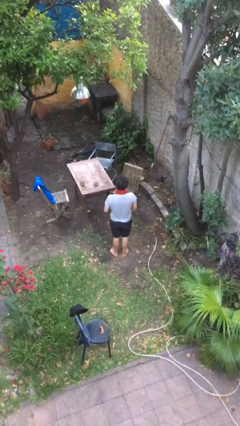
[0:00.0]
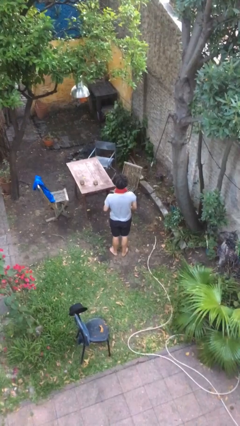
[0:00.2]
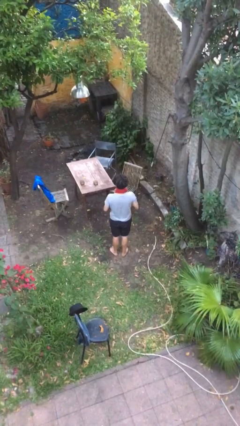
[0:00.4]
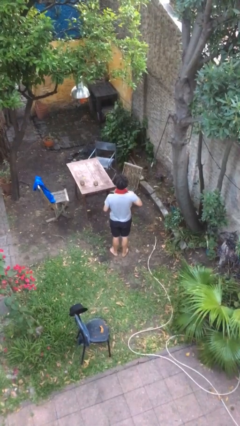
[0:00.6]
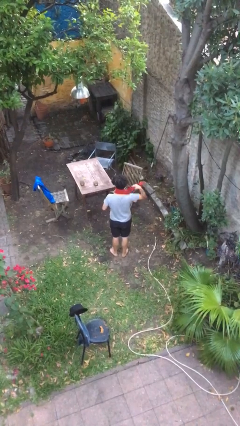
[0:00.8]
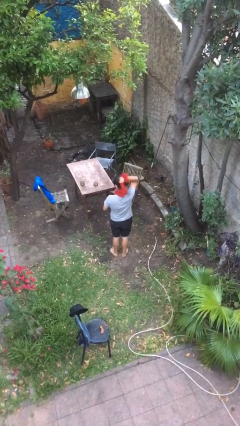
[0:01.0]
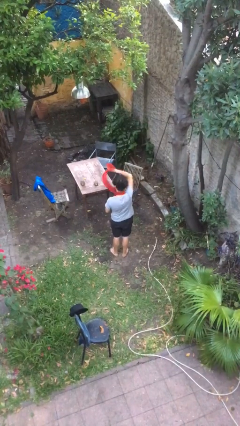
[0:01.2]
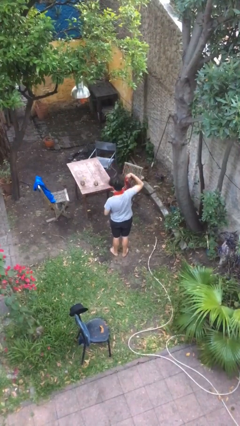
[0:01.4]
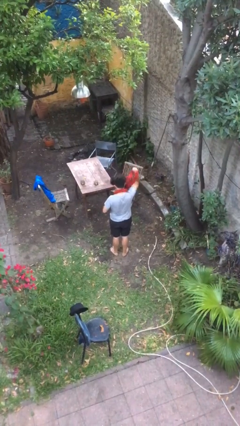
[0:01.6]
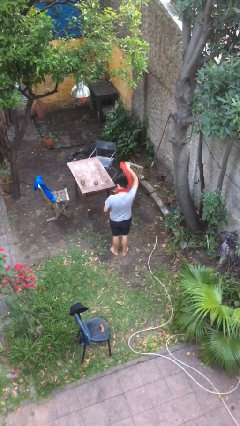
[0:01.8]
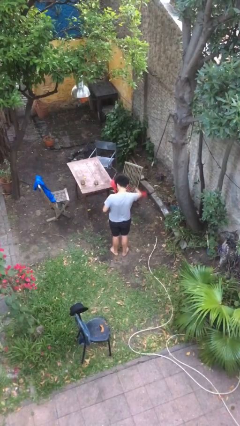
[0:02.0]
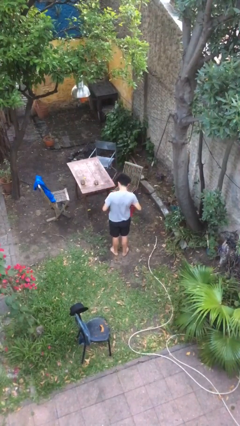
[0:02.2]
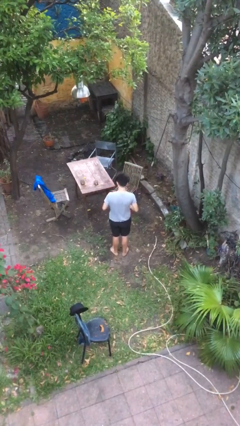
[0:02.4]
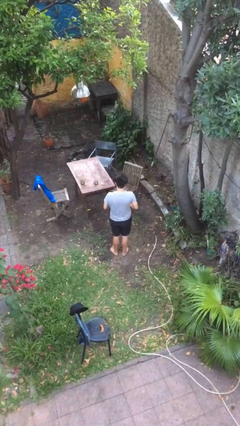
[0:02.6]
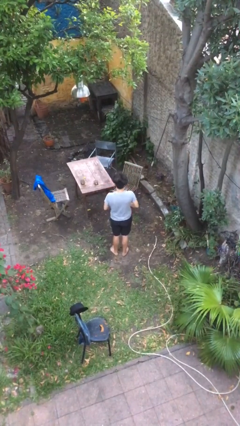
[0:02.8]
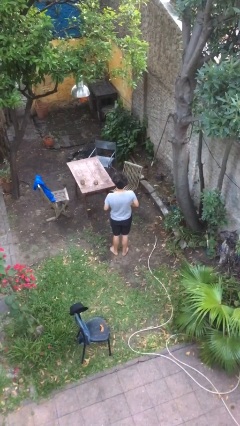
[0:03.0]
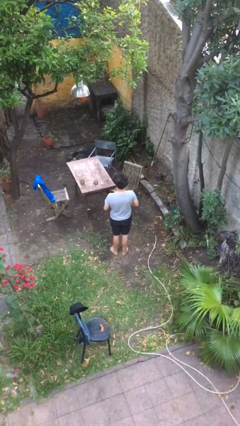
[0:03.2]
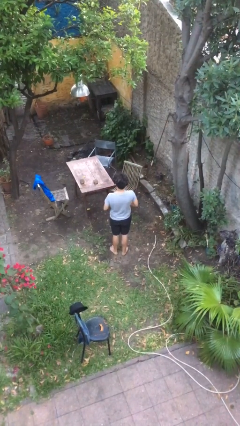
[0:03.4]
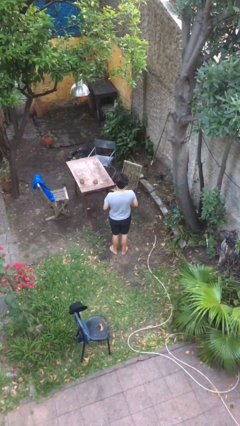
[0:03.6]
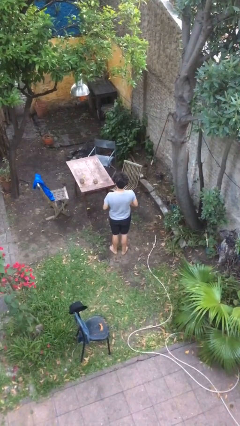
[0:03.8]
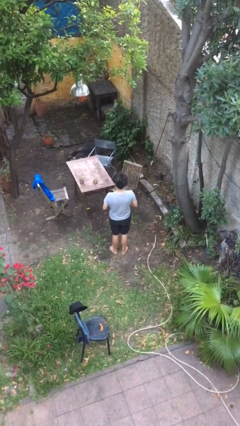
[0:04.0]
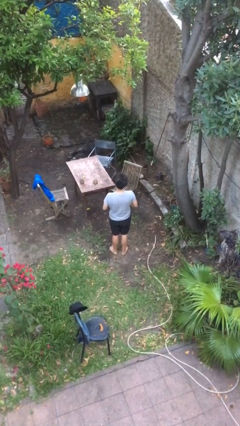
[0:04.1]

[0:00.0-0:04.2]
person takes off scarf

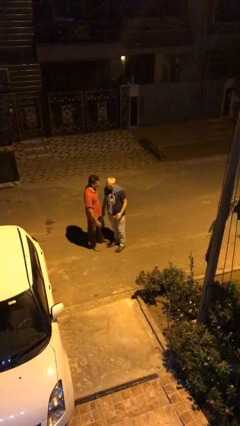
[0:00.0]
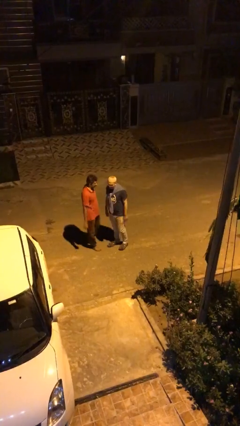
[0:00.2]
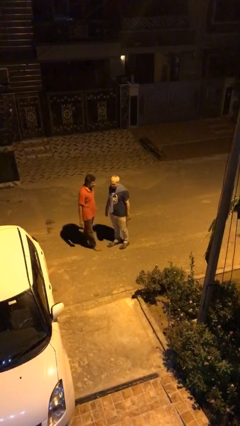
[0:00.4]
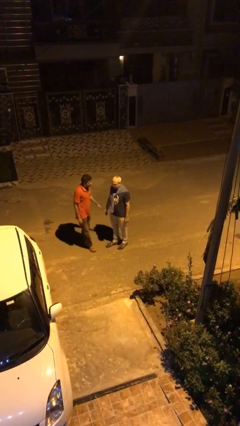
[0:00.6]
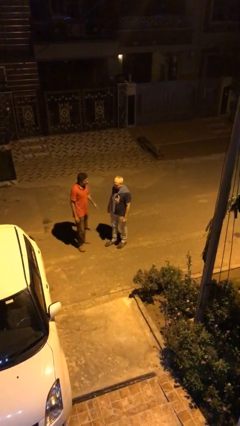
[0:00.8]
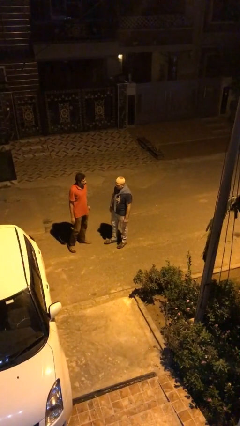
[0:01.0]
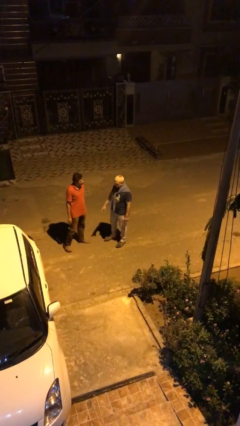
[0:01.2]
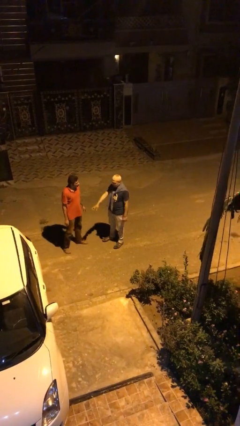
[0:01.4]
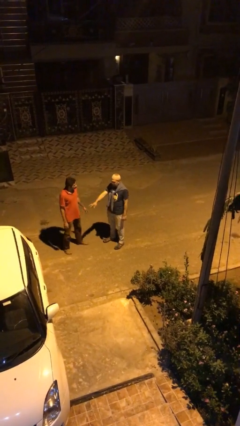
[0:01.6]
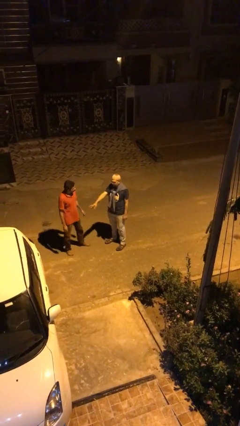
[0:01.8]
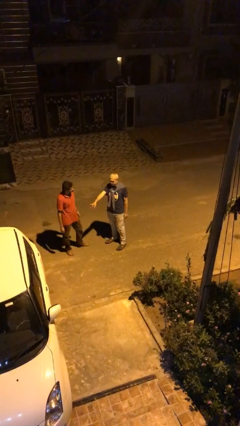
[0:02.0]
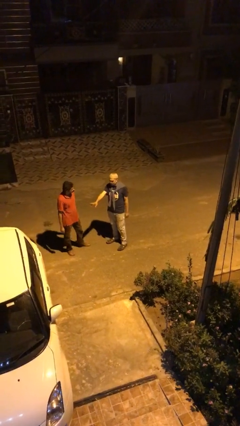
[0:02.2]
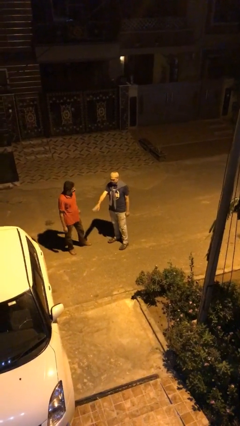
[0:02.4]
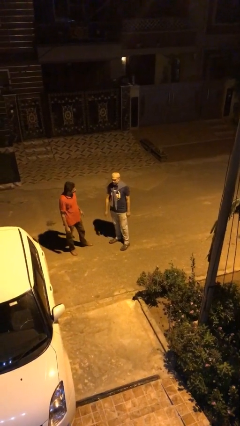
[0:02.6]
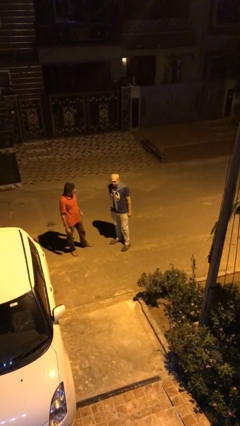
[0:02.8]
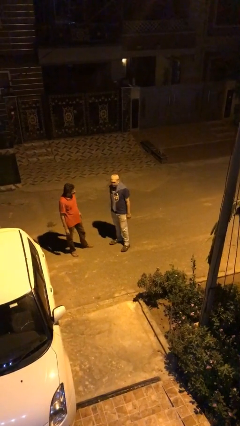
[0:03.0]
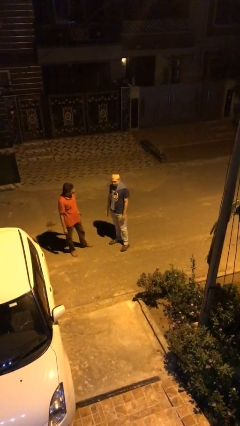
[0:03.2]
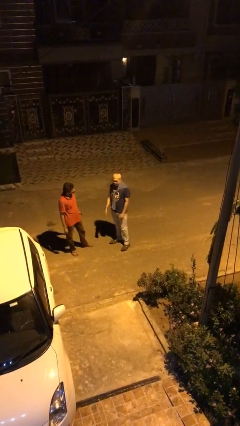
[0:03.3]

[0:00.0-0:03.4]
person talks to person

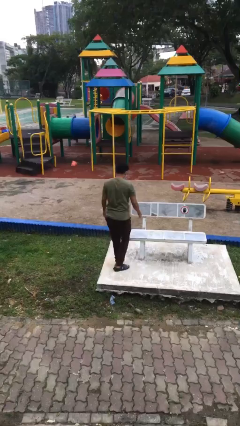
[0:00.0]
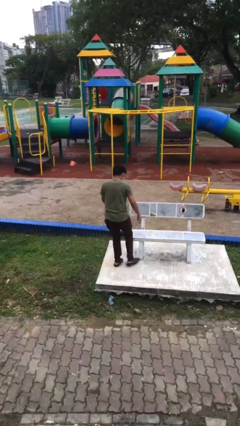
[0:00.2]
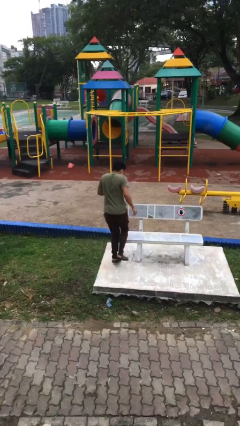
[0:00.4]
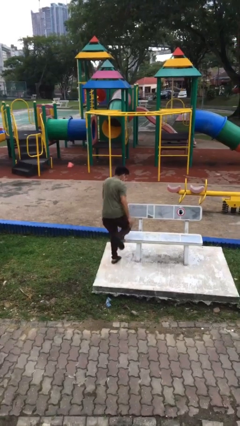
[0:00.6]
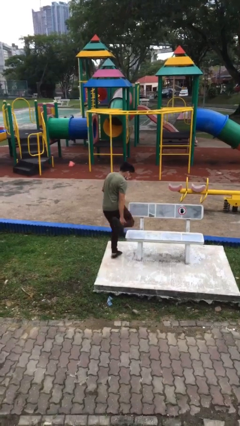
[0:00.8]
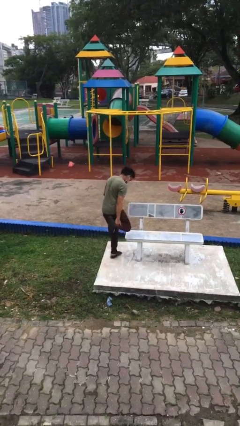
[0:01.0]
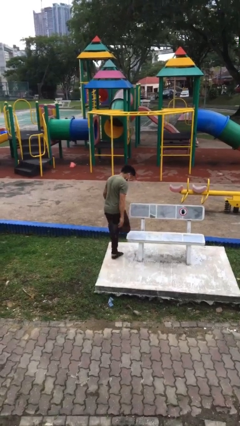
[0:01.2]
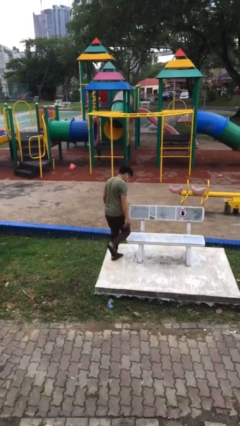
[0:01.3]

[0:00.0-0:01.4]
person stubs toe

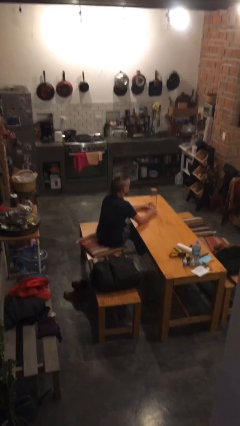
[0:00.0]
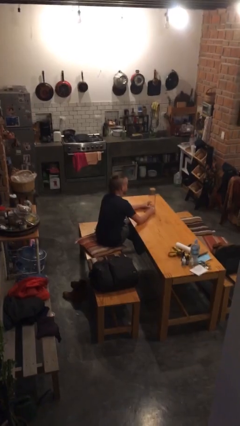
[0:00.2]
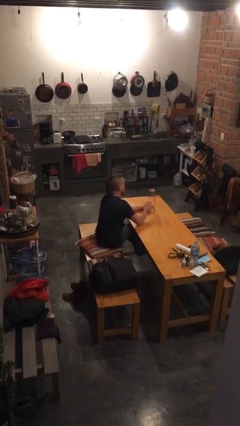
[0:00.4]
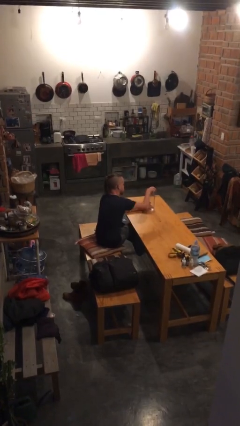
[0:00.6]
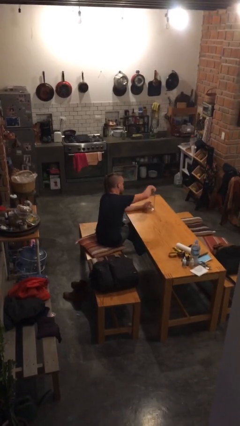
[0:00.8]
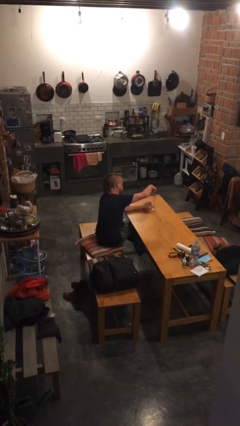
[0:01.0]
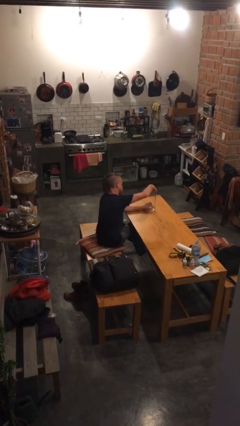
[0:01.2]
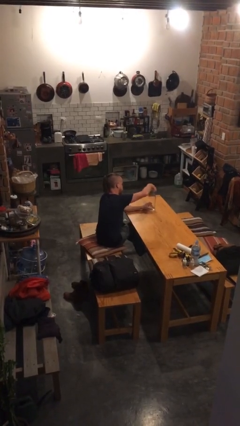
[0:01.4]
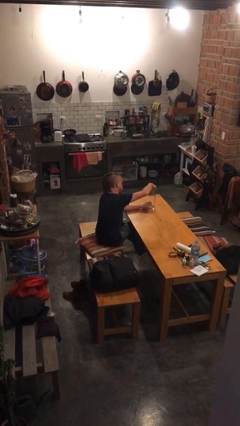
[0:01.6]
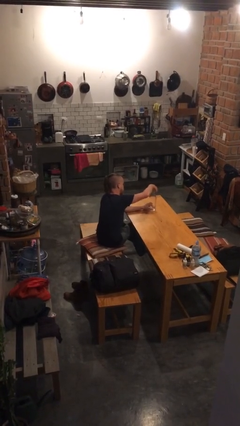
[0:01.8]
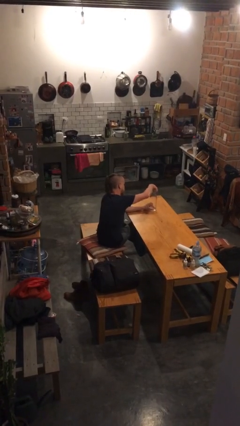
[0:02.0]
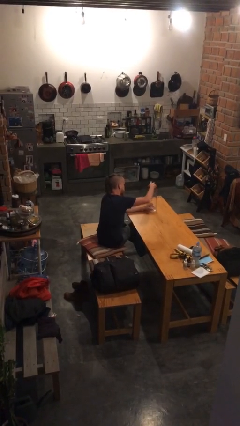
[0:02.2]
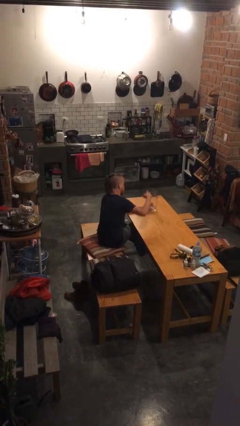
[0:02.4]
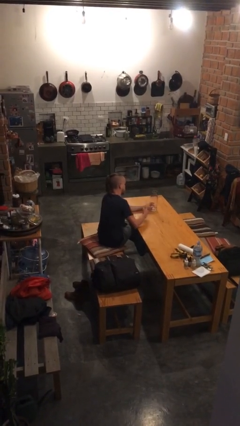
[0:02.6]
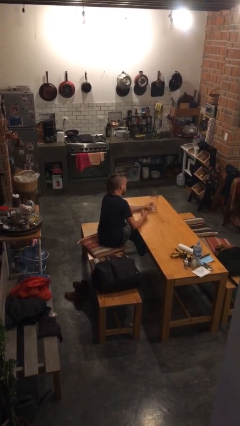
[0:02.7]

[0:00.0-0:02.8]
person opens jar

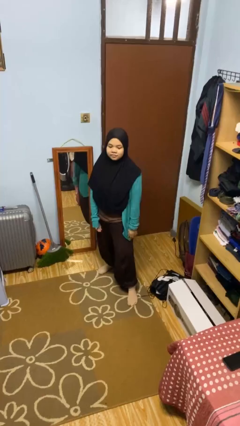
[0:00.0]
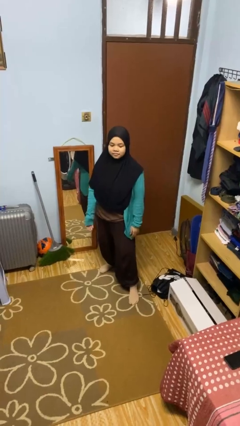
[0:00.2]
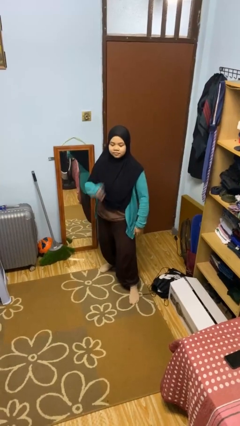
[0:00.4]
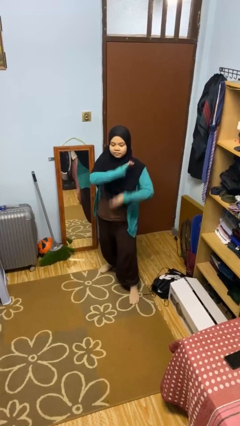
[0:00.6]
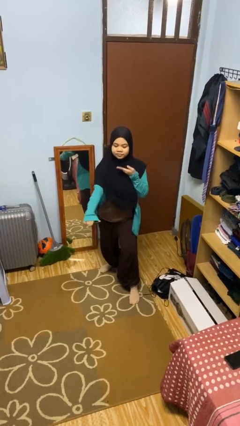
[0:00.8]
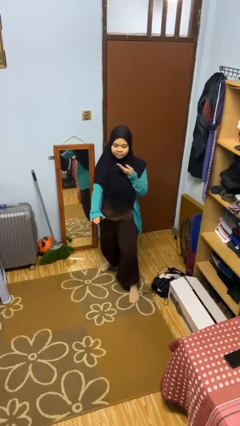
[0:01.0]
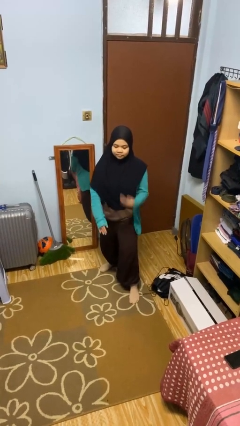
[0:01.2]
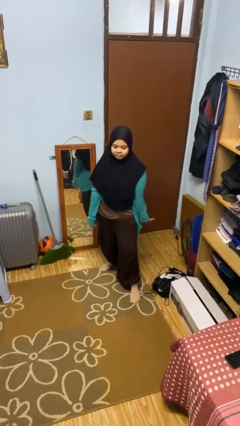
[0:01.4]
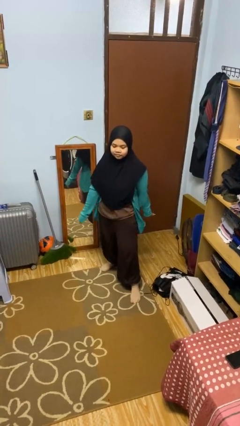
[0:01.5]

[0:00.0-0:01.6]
person karate chop

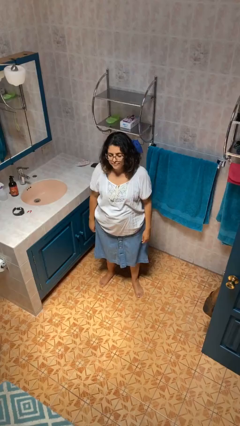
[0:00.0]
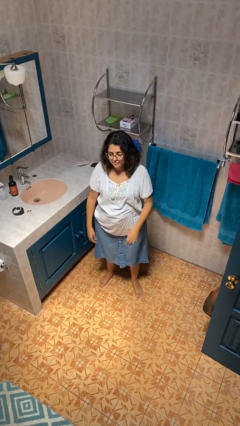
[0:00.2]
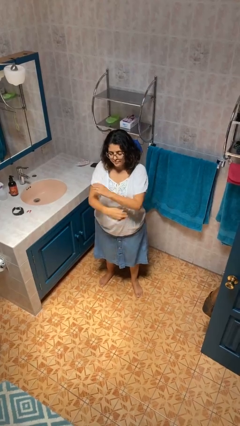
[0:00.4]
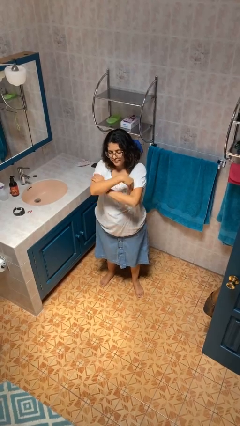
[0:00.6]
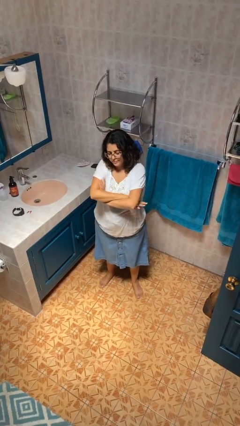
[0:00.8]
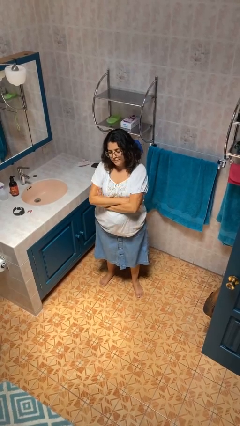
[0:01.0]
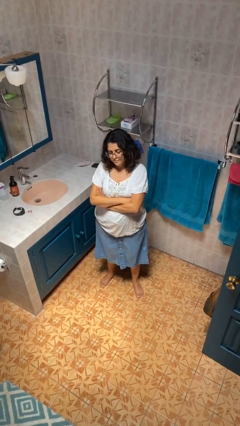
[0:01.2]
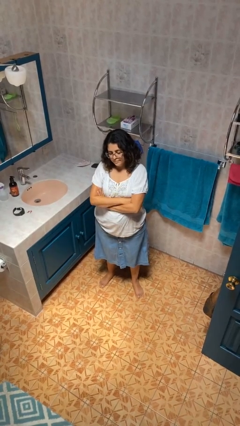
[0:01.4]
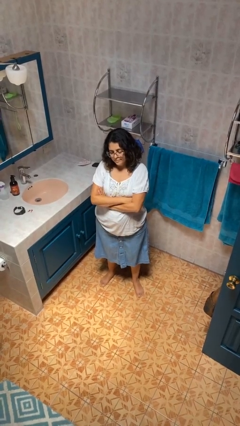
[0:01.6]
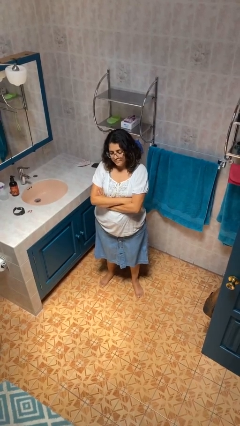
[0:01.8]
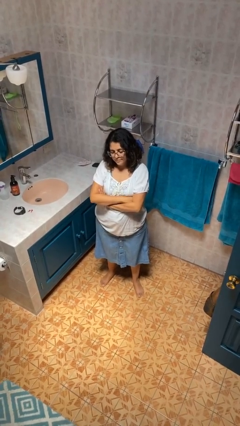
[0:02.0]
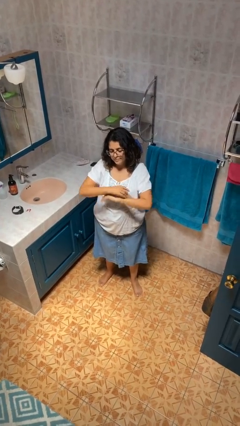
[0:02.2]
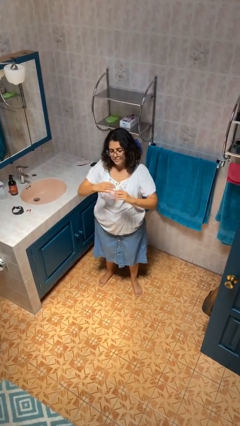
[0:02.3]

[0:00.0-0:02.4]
person crosses arms

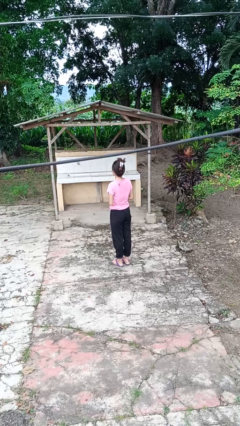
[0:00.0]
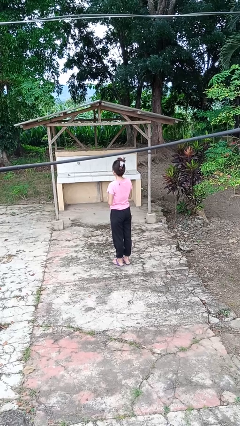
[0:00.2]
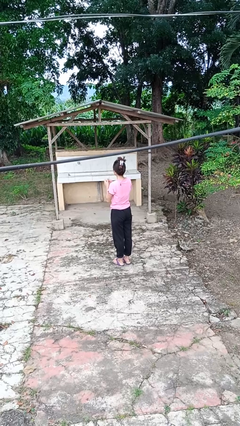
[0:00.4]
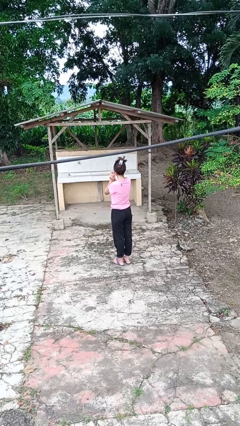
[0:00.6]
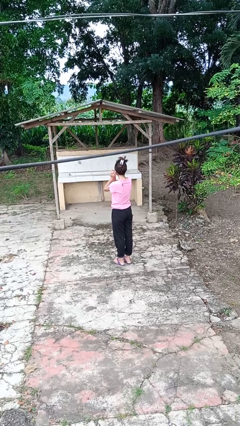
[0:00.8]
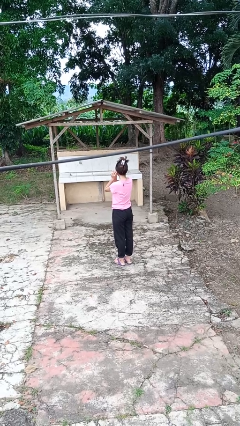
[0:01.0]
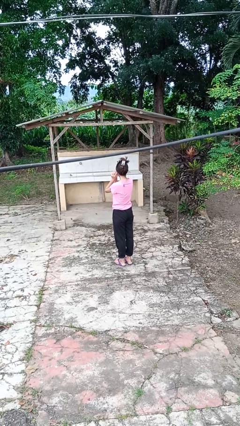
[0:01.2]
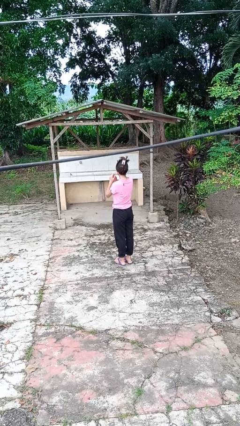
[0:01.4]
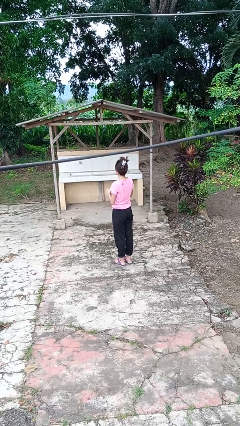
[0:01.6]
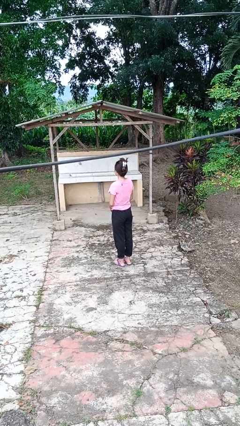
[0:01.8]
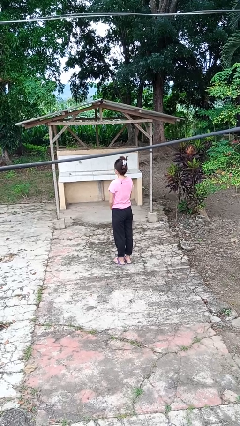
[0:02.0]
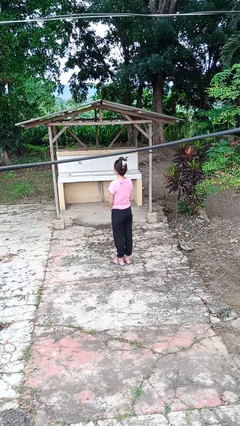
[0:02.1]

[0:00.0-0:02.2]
person takes off earrings
